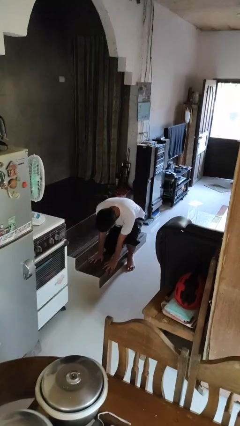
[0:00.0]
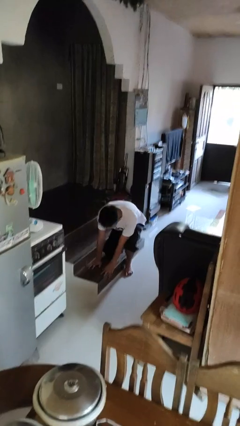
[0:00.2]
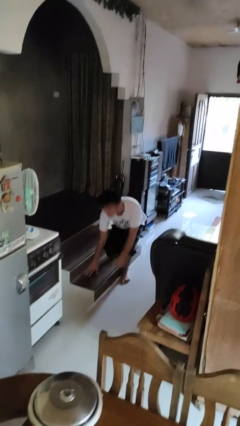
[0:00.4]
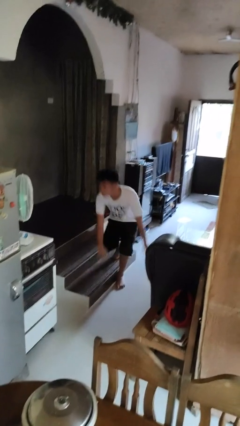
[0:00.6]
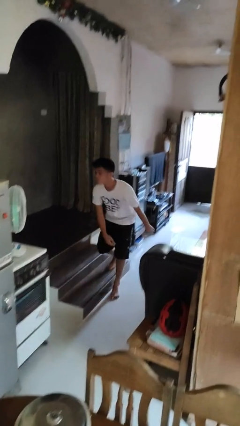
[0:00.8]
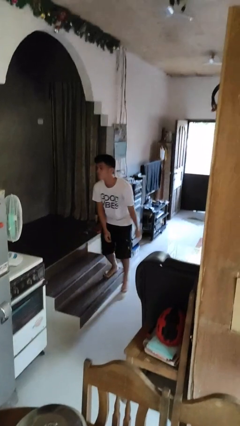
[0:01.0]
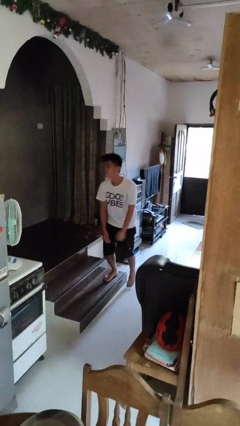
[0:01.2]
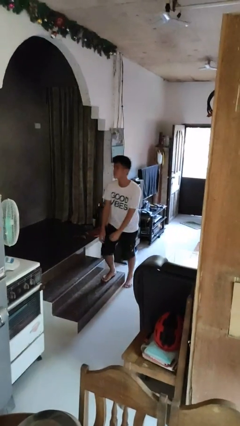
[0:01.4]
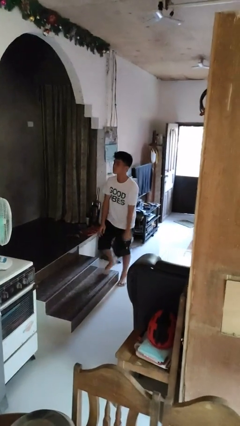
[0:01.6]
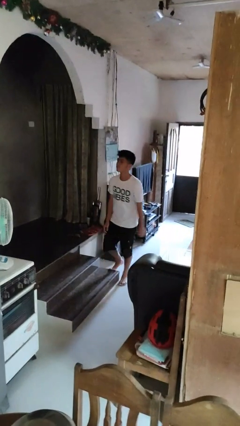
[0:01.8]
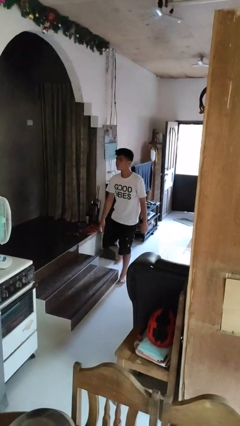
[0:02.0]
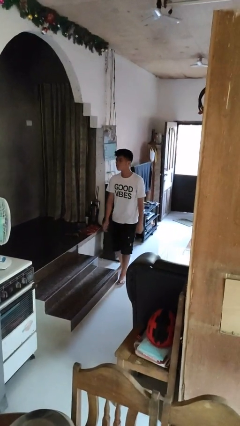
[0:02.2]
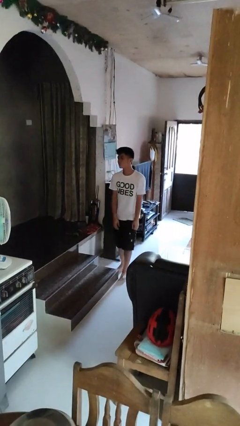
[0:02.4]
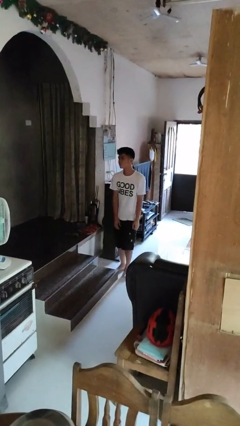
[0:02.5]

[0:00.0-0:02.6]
person stands up from floor

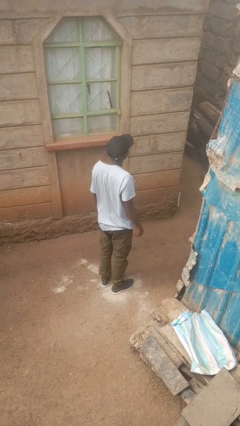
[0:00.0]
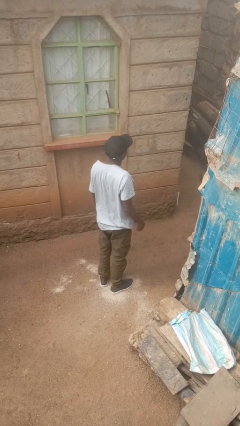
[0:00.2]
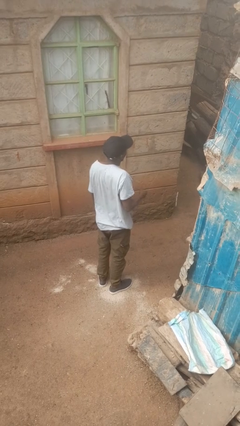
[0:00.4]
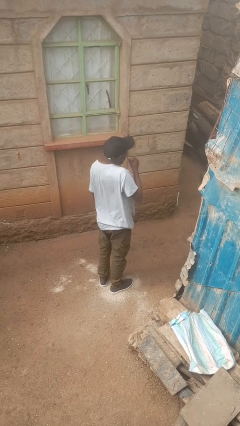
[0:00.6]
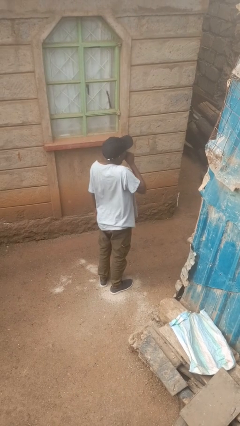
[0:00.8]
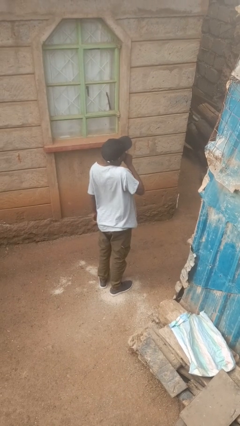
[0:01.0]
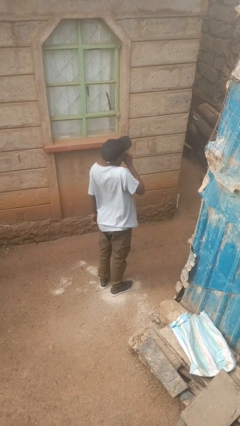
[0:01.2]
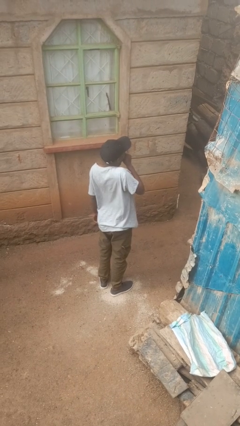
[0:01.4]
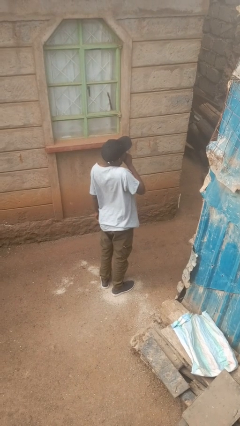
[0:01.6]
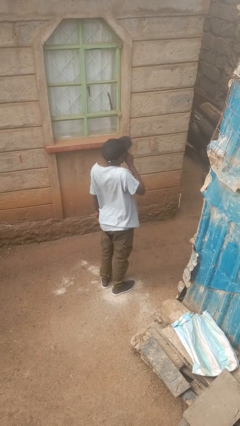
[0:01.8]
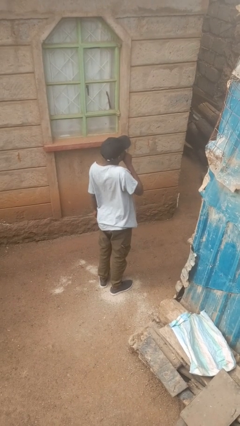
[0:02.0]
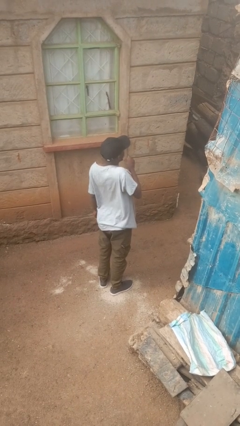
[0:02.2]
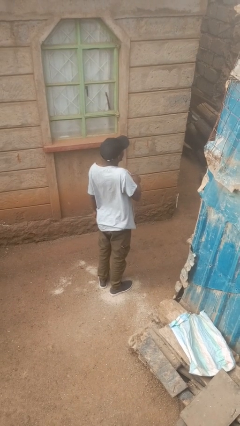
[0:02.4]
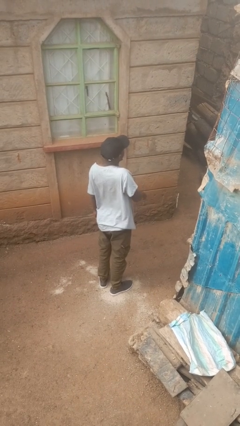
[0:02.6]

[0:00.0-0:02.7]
person yawns

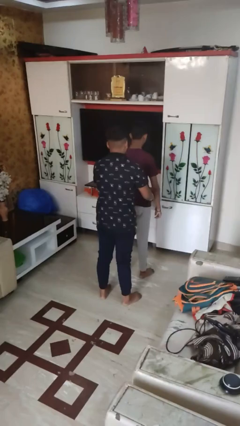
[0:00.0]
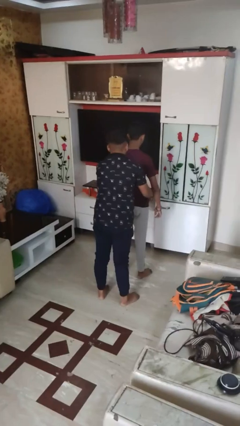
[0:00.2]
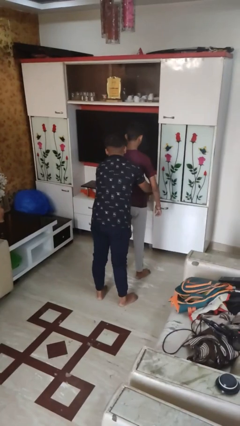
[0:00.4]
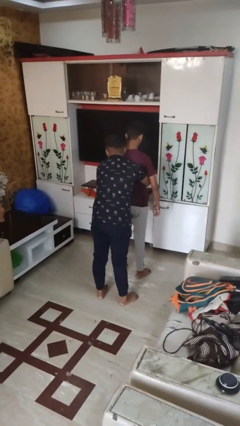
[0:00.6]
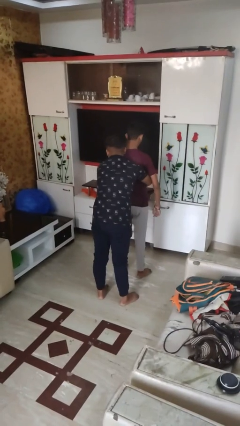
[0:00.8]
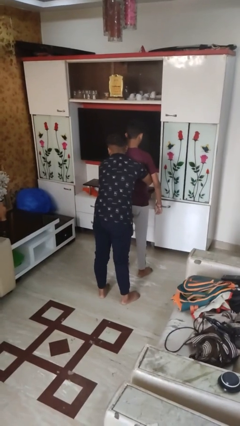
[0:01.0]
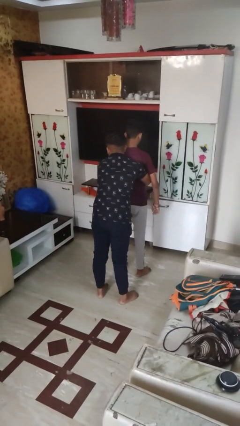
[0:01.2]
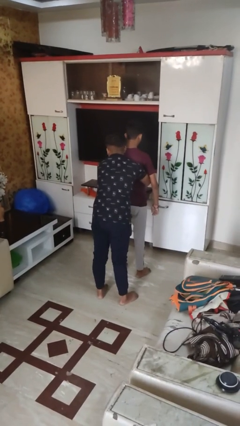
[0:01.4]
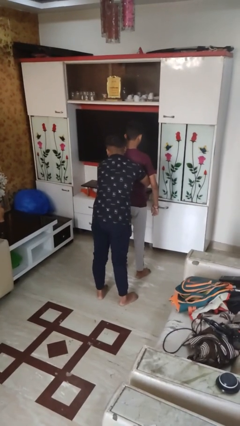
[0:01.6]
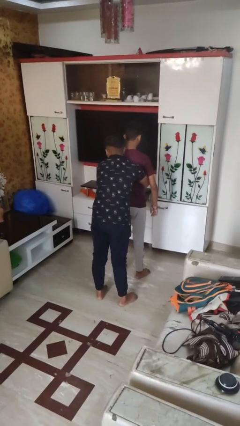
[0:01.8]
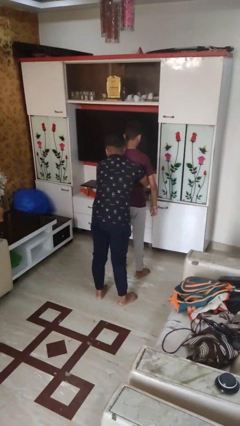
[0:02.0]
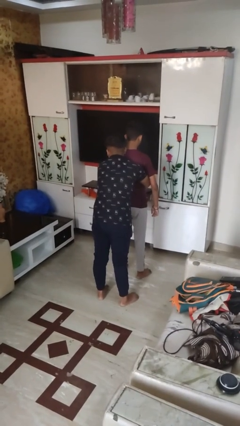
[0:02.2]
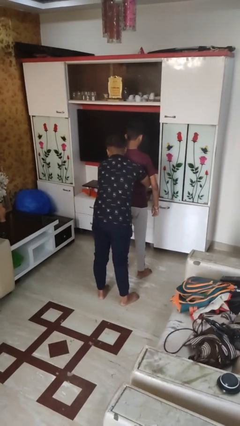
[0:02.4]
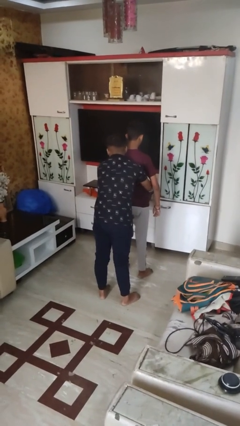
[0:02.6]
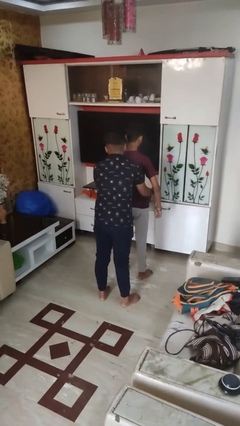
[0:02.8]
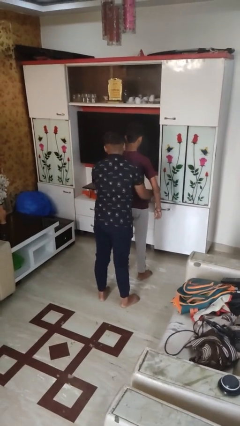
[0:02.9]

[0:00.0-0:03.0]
person hugs person from behind

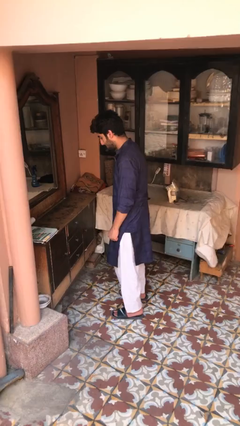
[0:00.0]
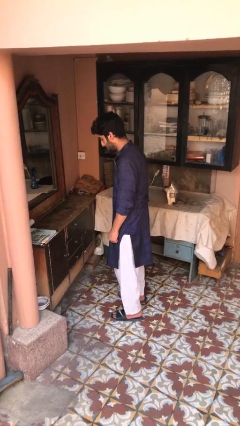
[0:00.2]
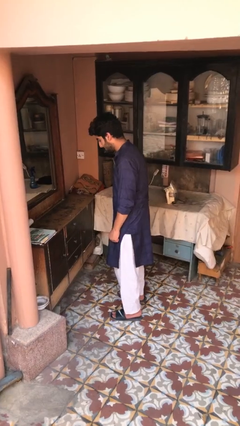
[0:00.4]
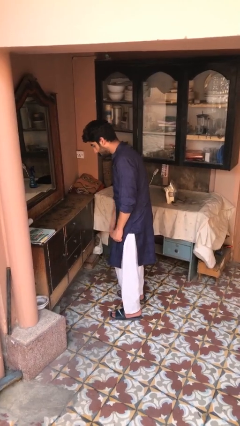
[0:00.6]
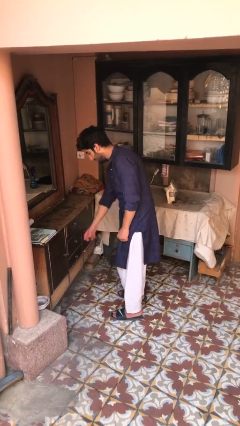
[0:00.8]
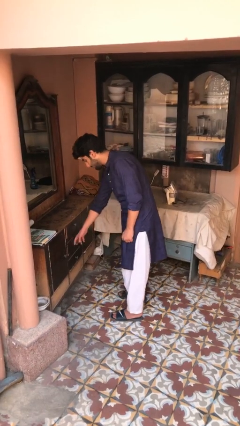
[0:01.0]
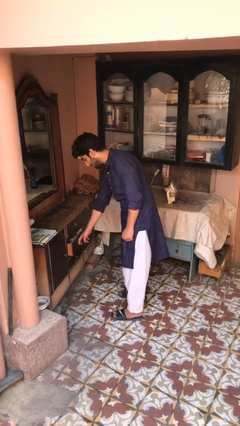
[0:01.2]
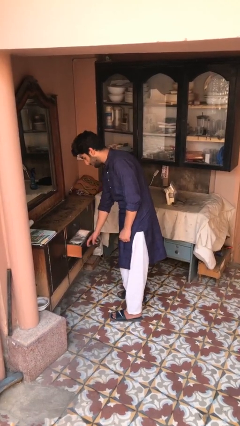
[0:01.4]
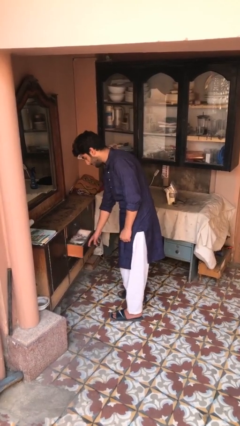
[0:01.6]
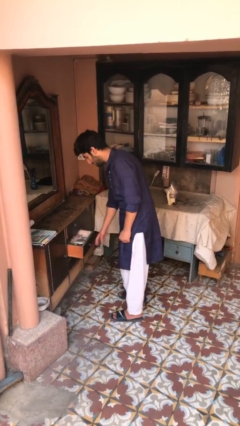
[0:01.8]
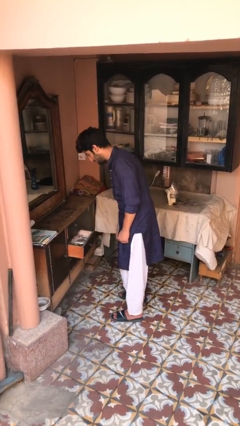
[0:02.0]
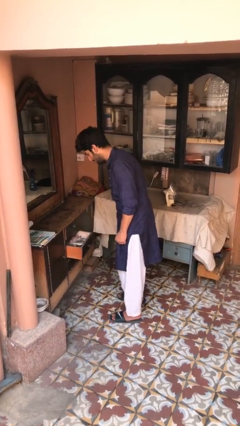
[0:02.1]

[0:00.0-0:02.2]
person opens dresser drawer

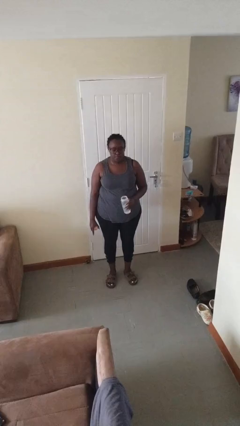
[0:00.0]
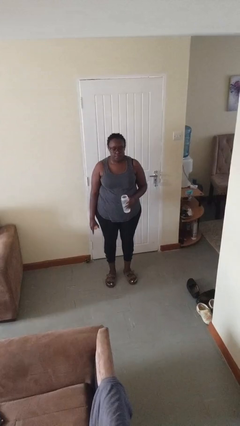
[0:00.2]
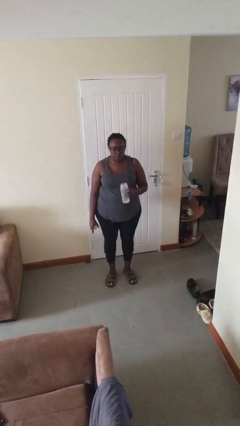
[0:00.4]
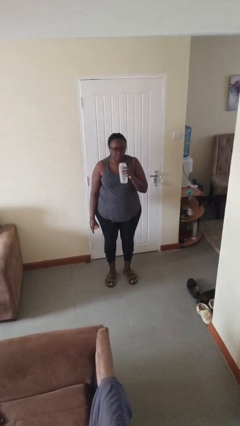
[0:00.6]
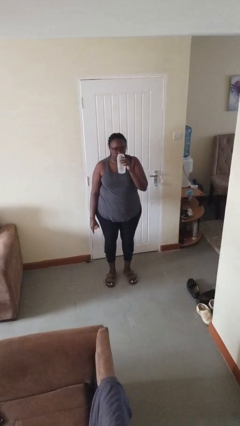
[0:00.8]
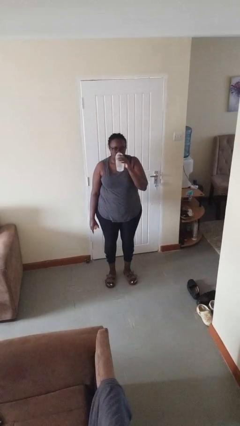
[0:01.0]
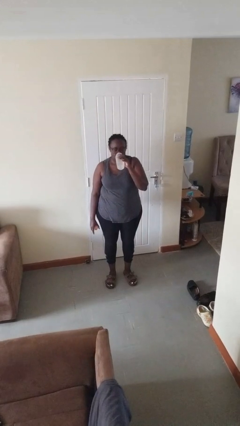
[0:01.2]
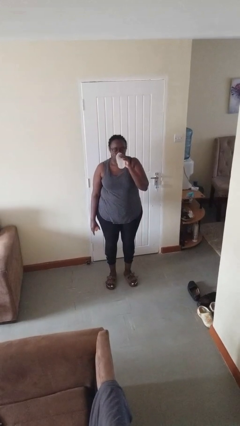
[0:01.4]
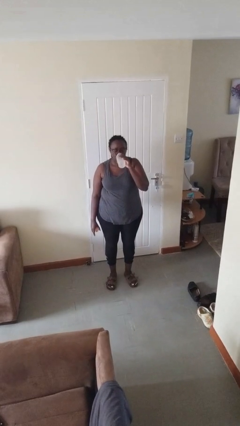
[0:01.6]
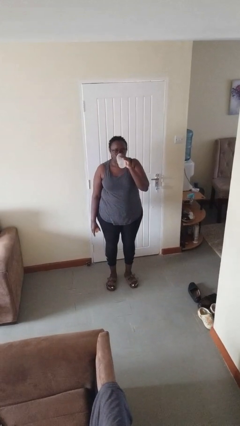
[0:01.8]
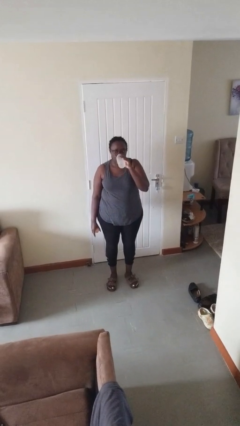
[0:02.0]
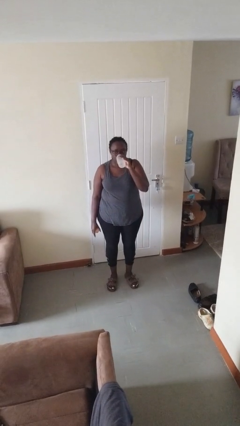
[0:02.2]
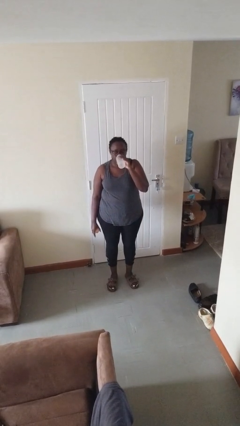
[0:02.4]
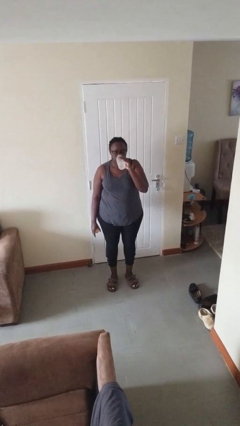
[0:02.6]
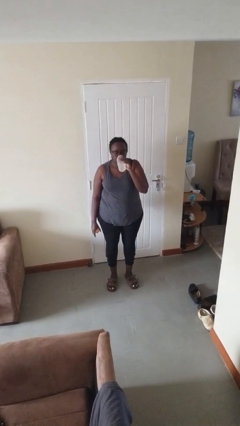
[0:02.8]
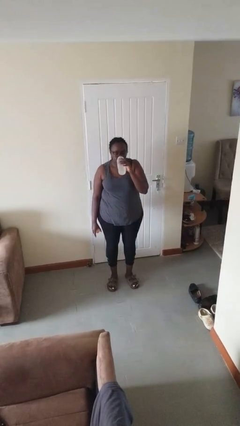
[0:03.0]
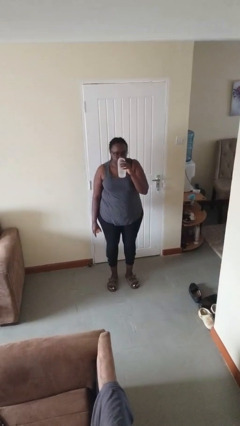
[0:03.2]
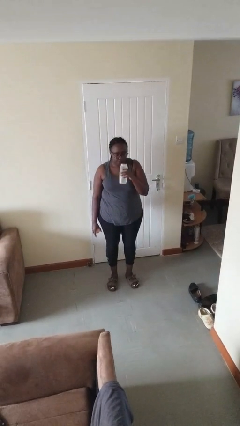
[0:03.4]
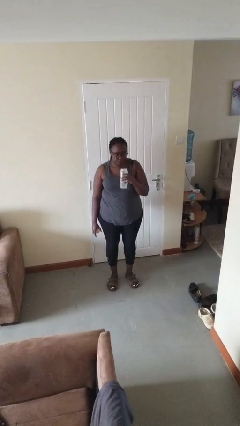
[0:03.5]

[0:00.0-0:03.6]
person drinks from bottle

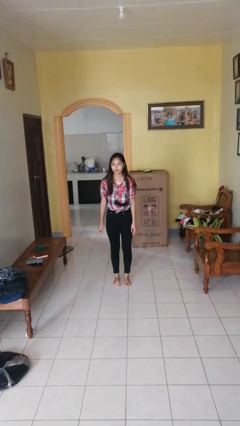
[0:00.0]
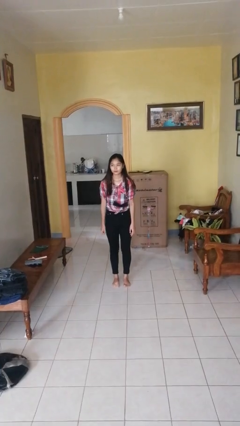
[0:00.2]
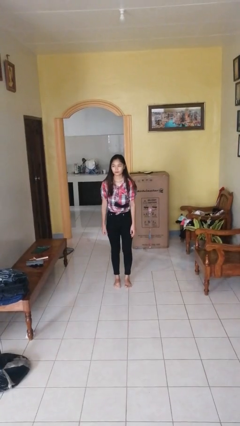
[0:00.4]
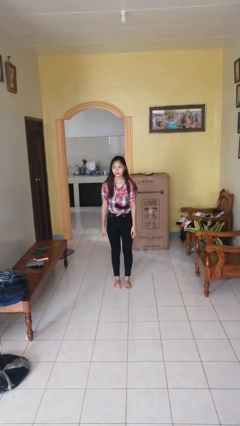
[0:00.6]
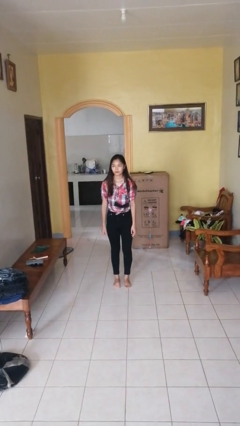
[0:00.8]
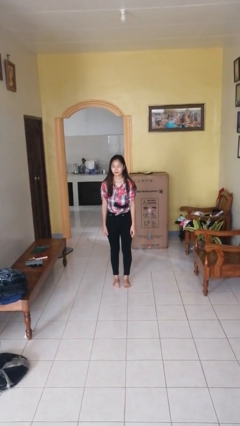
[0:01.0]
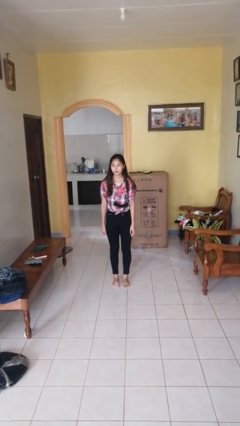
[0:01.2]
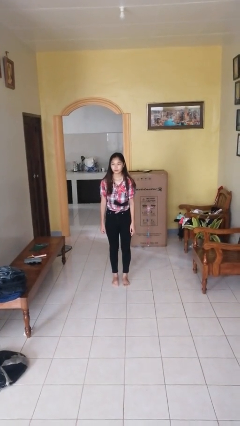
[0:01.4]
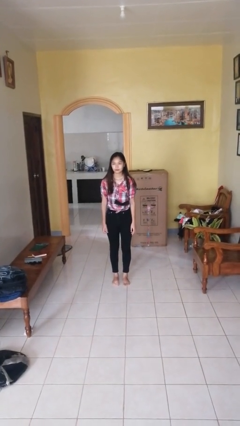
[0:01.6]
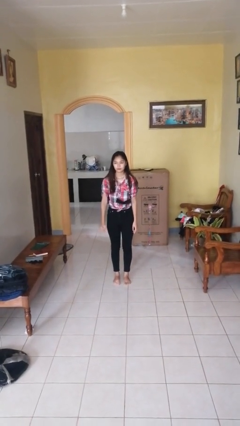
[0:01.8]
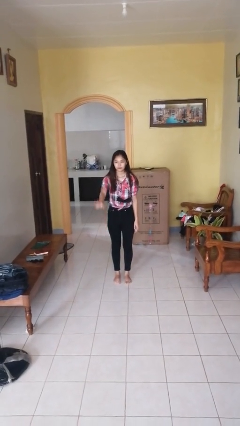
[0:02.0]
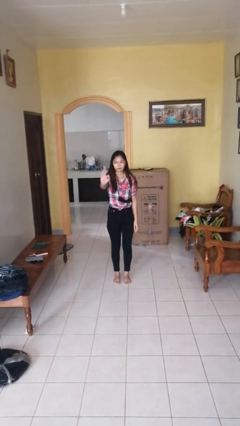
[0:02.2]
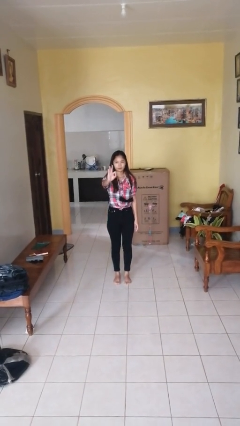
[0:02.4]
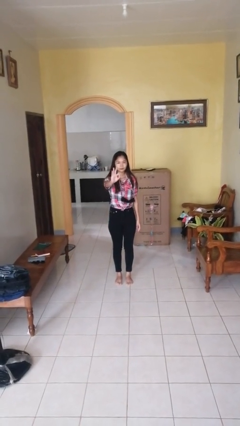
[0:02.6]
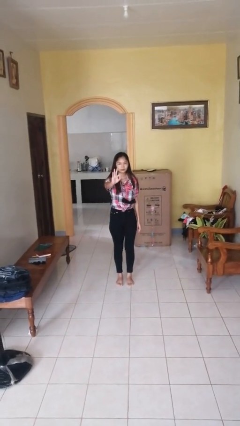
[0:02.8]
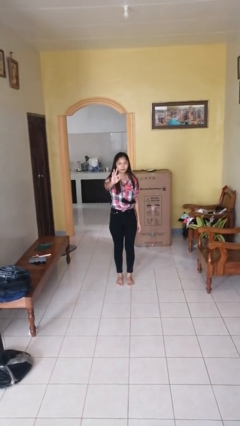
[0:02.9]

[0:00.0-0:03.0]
person gestures number three

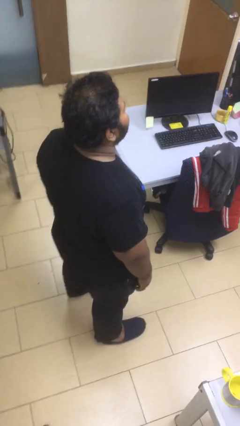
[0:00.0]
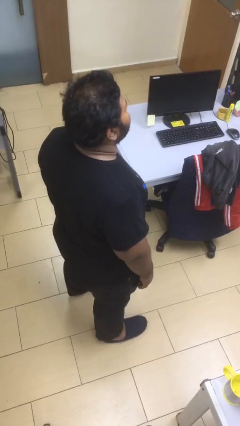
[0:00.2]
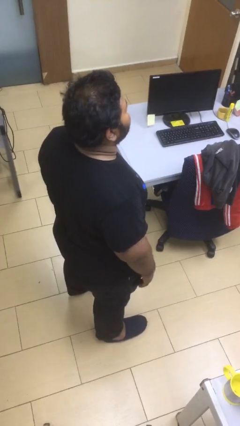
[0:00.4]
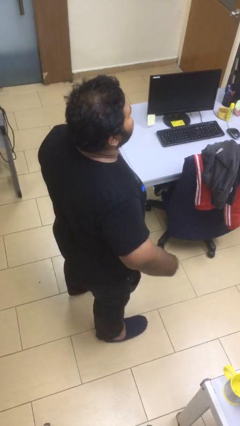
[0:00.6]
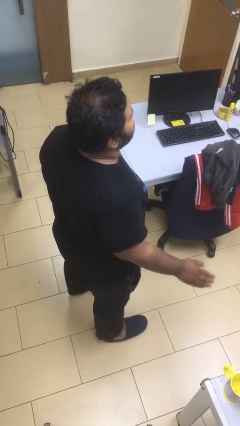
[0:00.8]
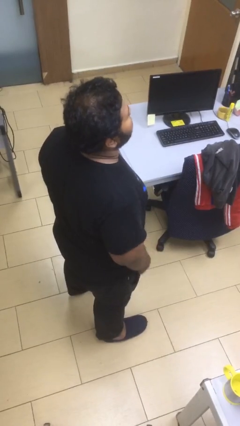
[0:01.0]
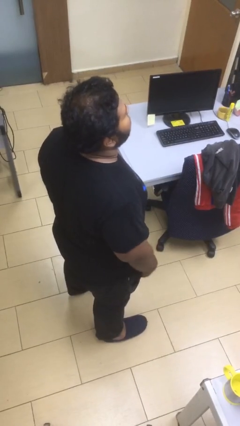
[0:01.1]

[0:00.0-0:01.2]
person slaps hands on thighs
